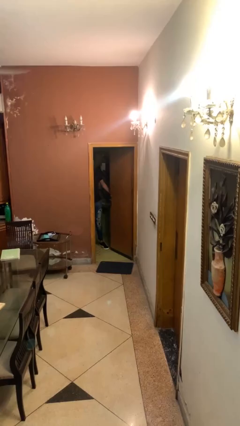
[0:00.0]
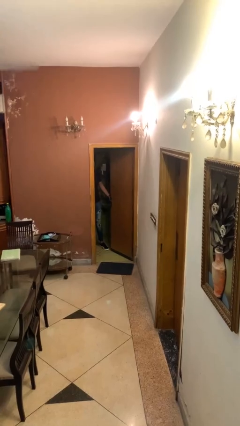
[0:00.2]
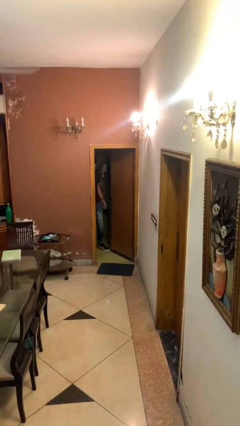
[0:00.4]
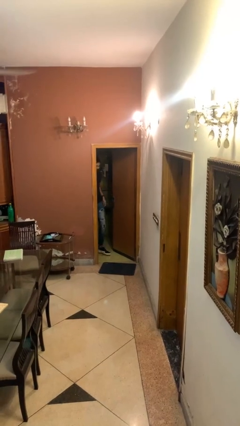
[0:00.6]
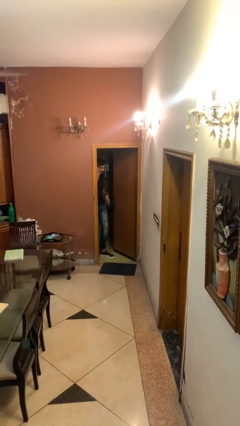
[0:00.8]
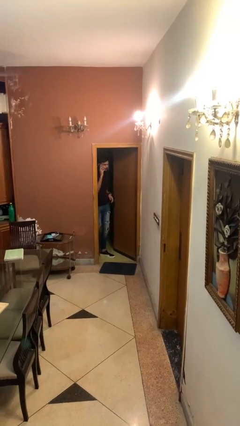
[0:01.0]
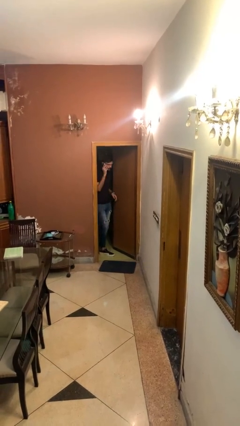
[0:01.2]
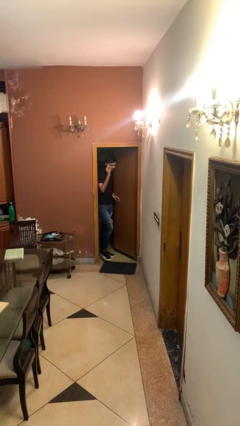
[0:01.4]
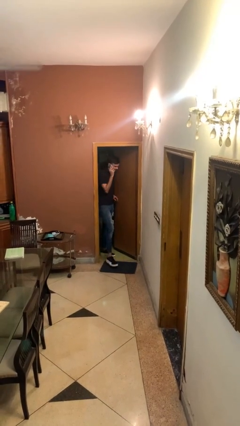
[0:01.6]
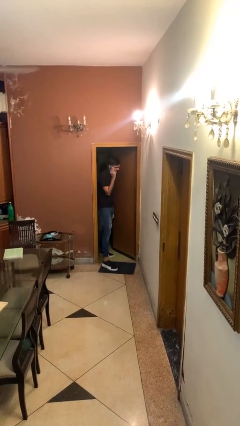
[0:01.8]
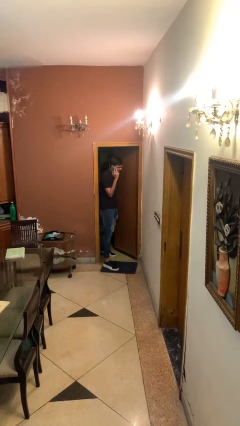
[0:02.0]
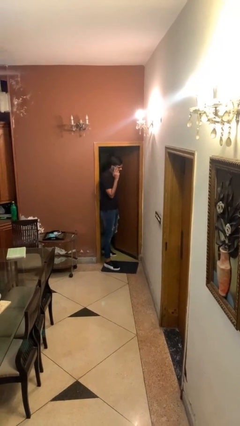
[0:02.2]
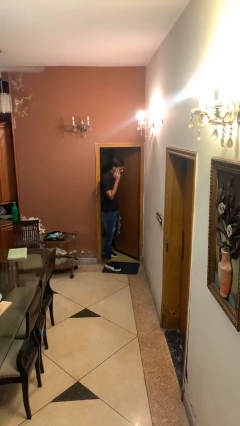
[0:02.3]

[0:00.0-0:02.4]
person enters scene through structure

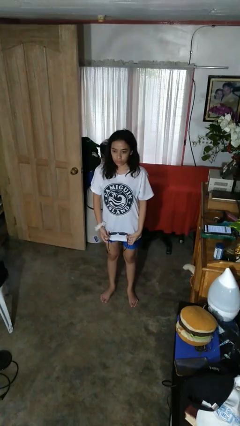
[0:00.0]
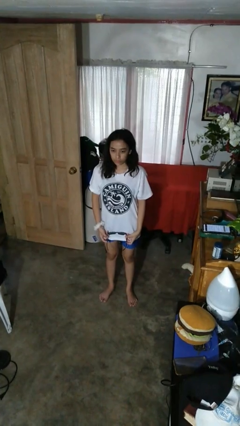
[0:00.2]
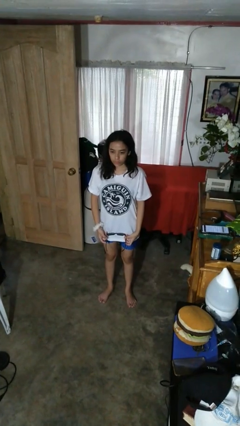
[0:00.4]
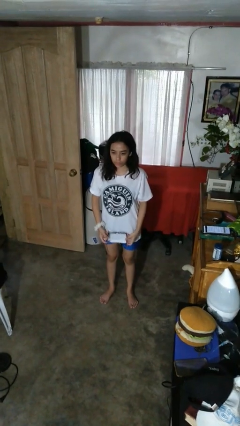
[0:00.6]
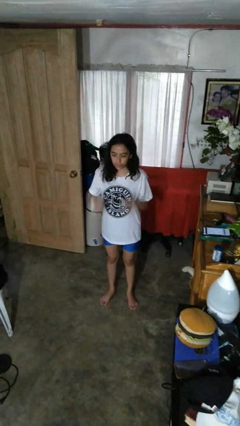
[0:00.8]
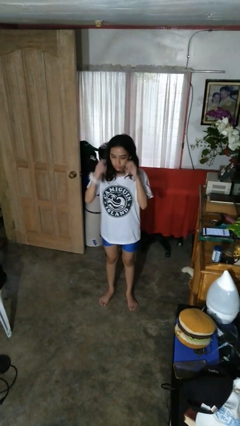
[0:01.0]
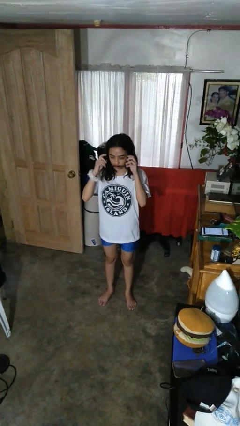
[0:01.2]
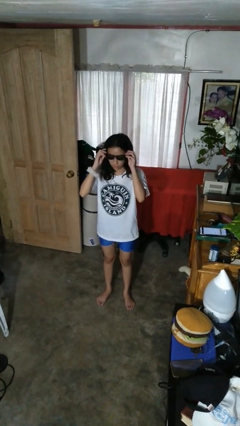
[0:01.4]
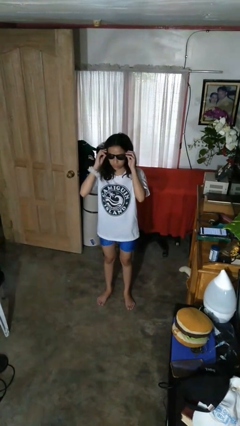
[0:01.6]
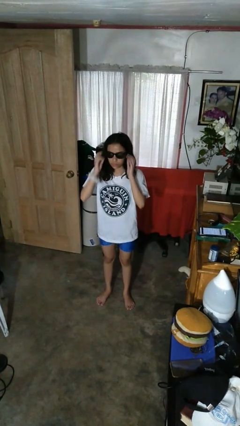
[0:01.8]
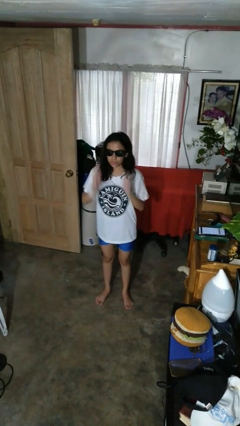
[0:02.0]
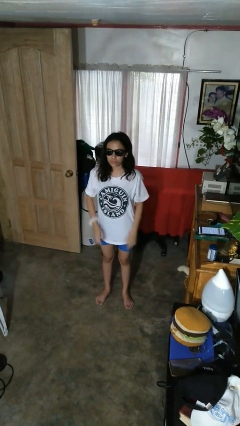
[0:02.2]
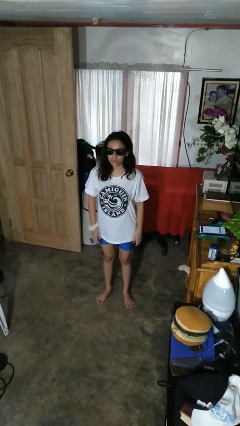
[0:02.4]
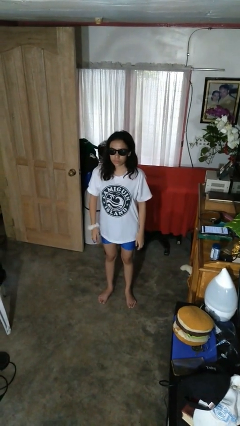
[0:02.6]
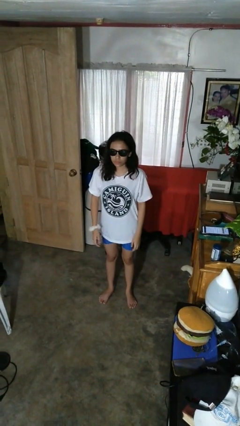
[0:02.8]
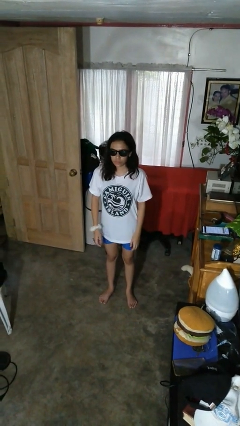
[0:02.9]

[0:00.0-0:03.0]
person puts on sunglasses

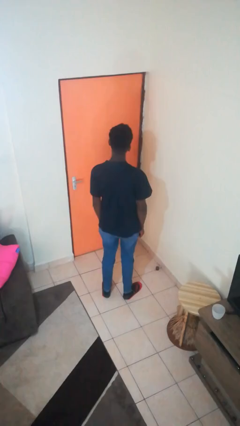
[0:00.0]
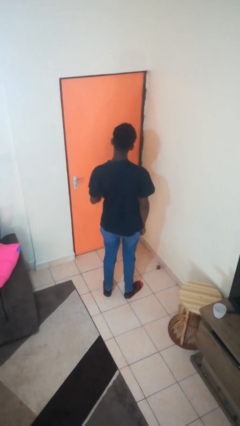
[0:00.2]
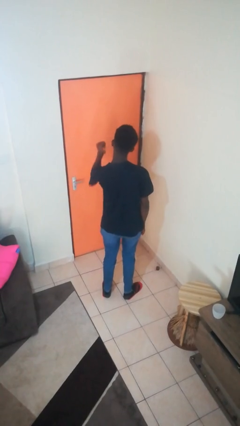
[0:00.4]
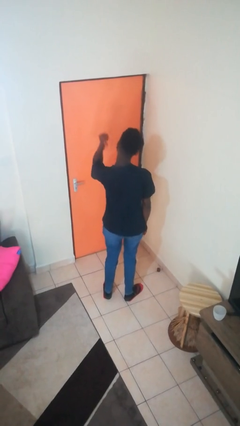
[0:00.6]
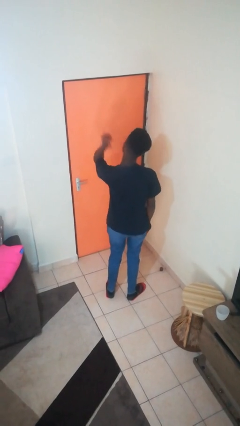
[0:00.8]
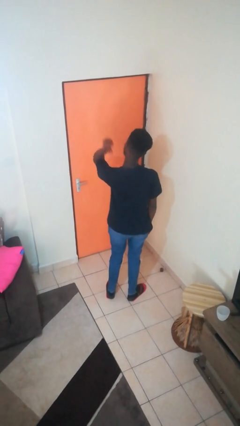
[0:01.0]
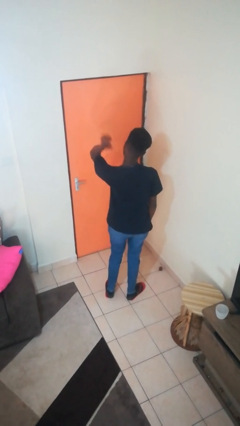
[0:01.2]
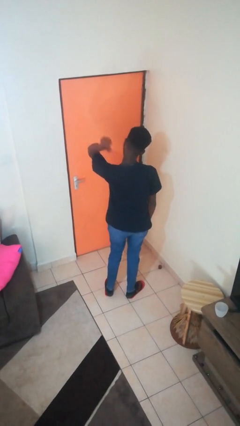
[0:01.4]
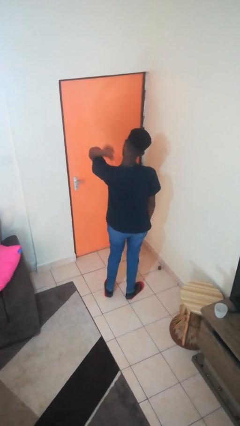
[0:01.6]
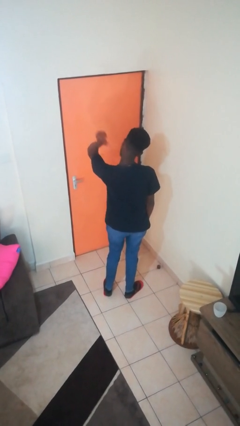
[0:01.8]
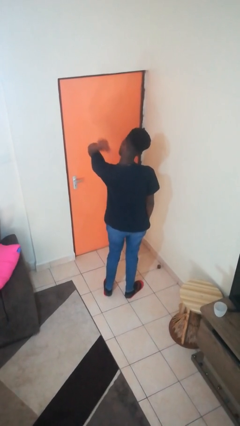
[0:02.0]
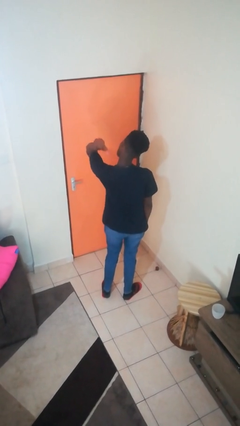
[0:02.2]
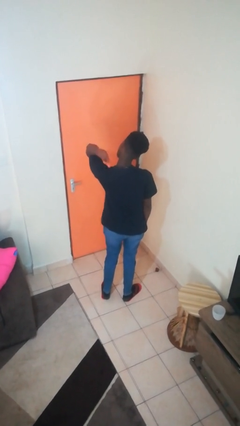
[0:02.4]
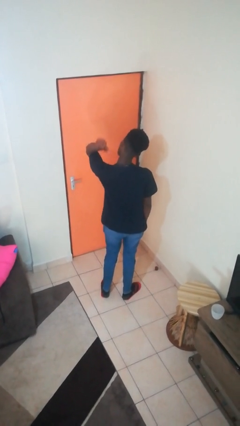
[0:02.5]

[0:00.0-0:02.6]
person gestures behind me

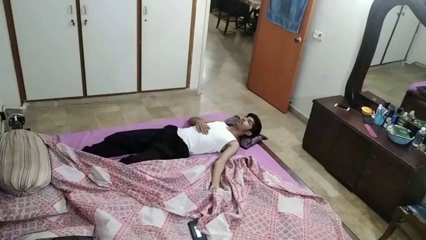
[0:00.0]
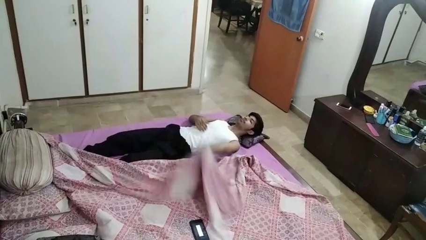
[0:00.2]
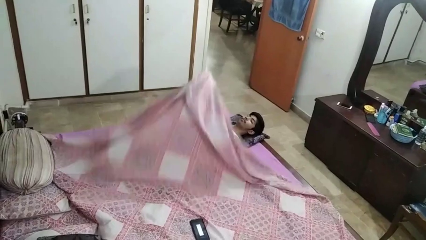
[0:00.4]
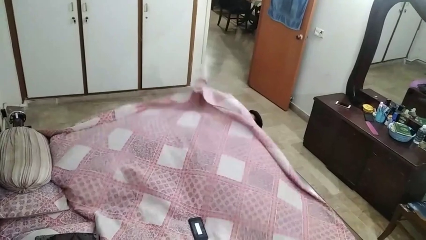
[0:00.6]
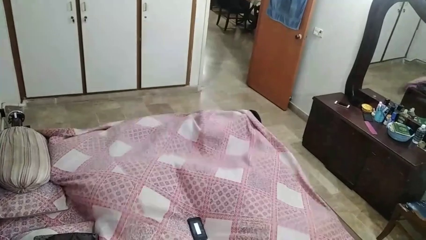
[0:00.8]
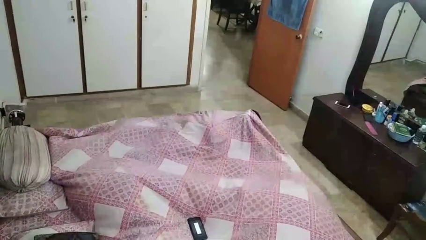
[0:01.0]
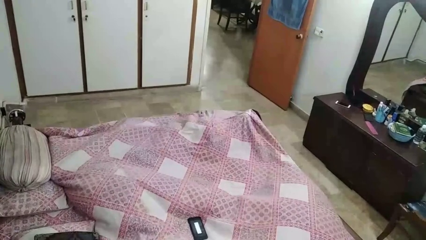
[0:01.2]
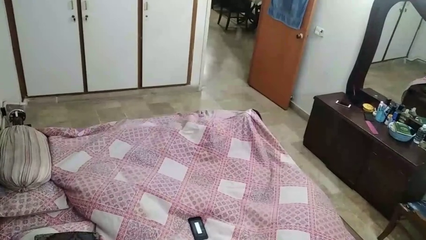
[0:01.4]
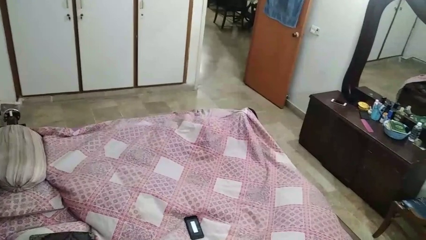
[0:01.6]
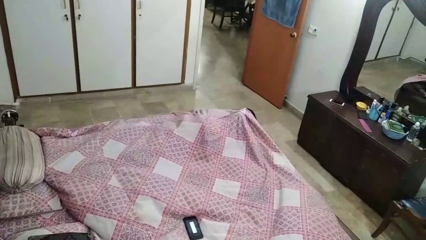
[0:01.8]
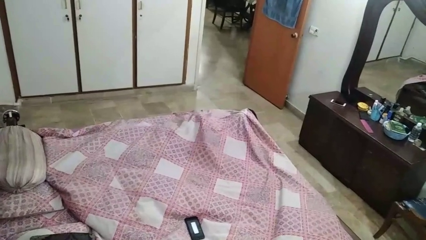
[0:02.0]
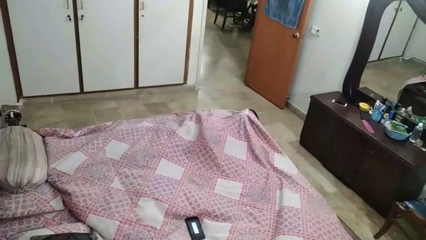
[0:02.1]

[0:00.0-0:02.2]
person covers with bedsheets

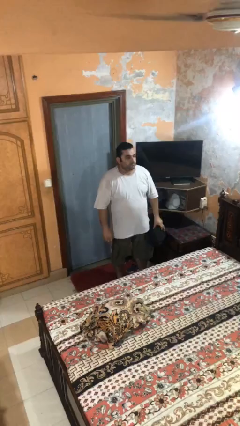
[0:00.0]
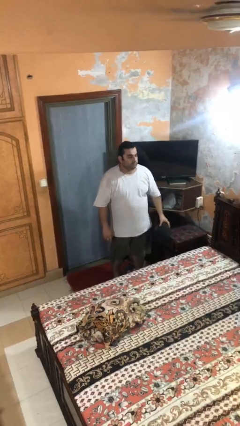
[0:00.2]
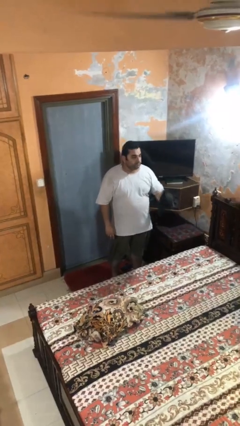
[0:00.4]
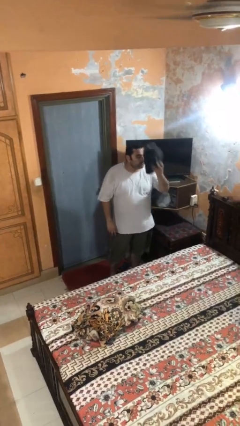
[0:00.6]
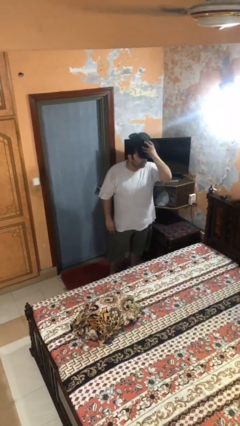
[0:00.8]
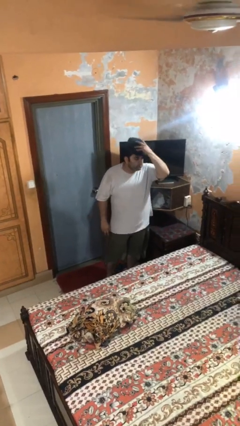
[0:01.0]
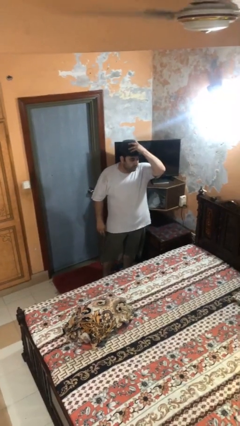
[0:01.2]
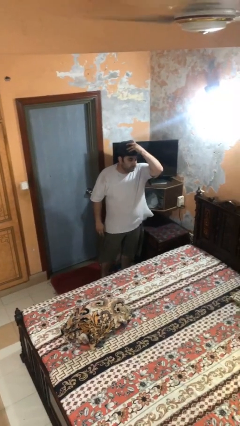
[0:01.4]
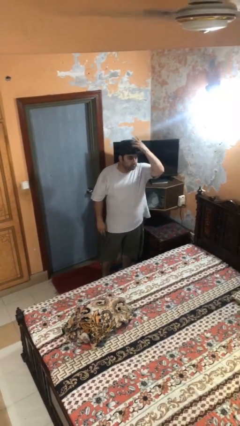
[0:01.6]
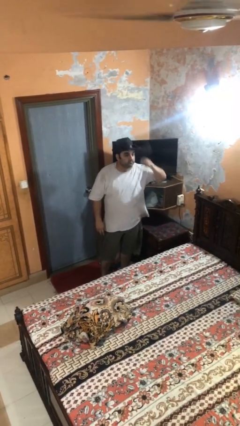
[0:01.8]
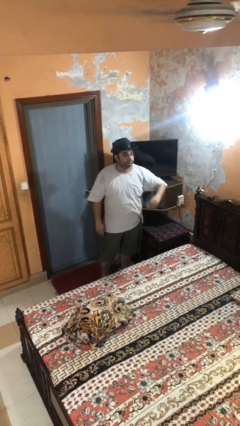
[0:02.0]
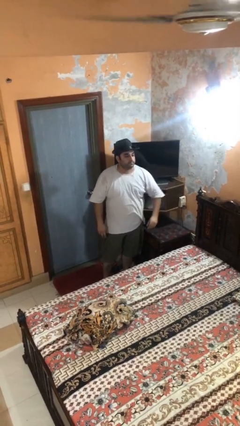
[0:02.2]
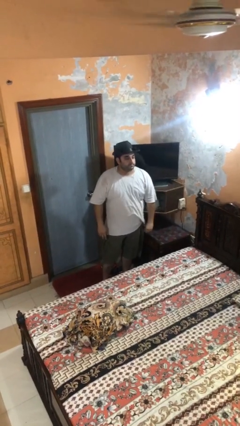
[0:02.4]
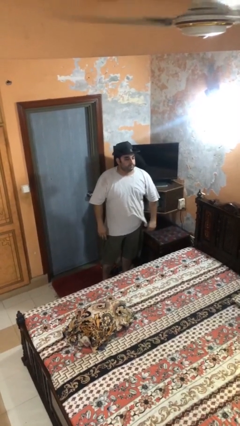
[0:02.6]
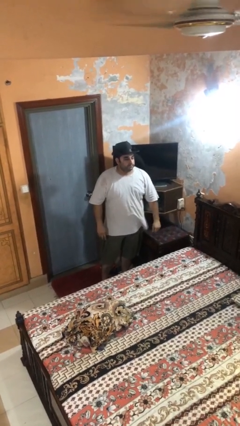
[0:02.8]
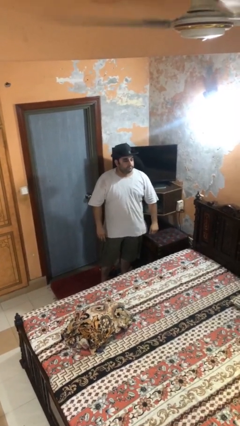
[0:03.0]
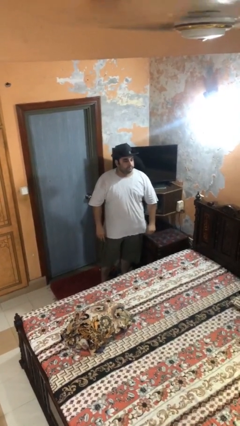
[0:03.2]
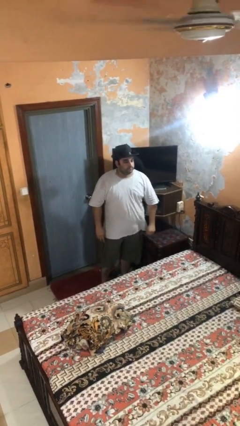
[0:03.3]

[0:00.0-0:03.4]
person puts on hat

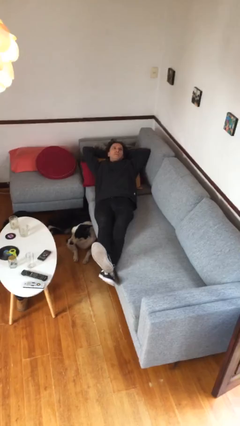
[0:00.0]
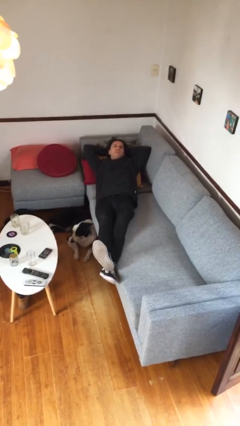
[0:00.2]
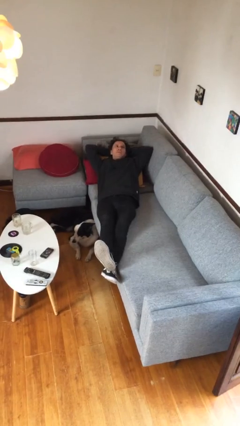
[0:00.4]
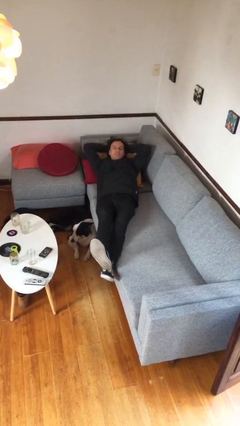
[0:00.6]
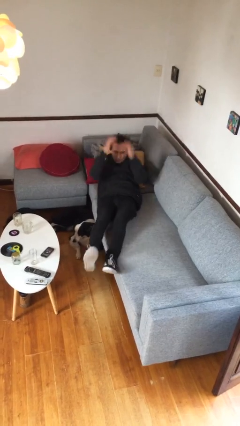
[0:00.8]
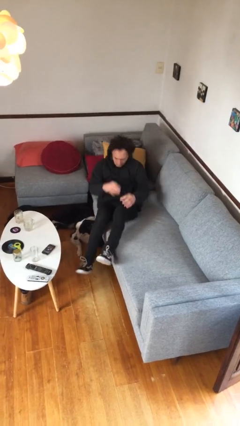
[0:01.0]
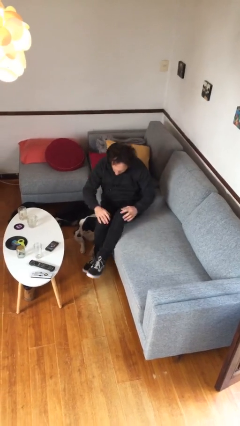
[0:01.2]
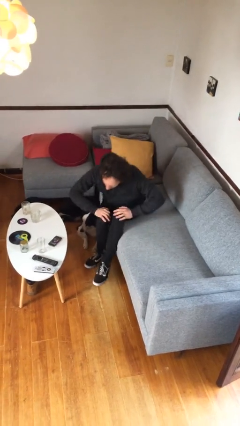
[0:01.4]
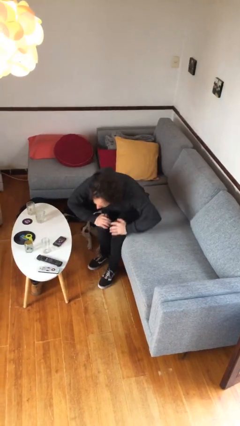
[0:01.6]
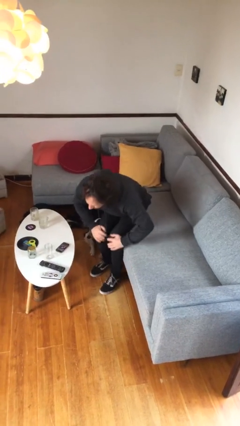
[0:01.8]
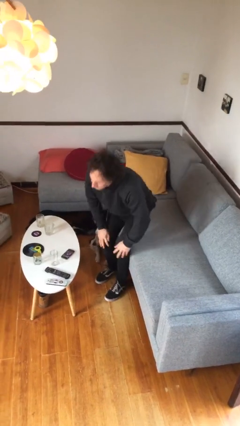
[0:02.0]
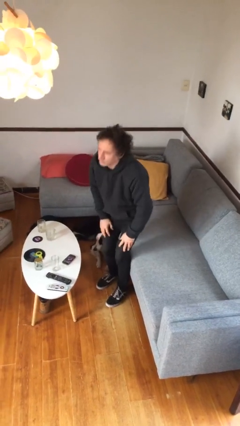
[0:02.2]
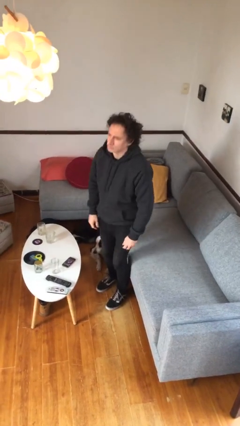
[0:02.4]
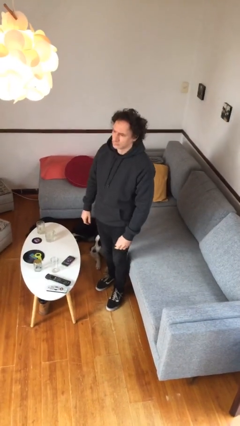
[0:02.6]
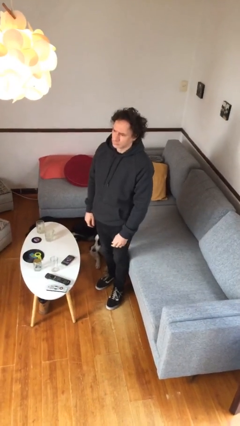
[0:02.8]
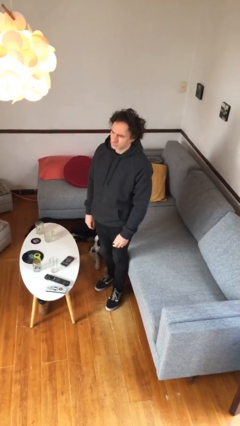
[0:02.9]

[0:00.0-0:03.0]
person stands up

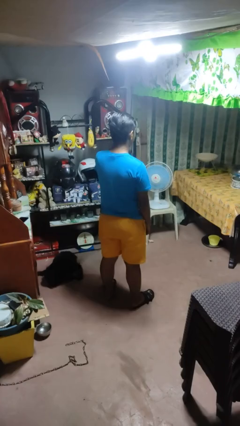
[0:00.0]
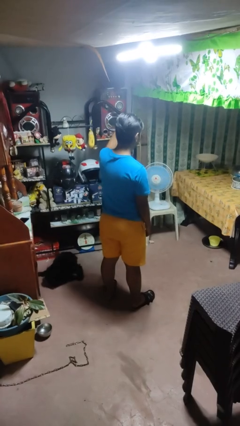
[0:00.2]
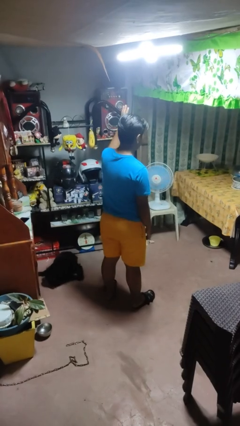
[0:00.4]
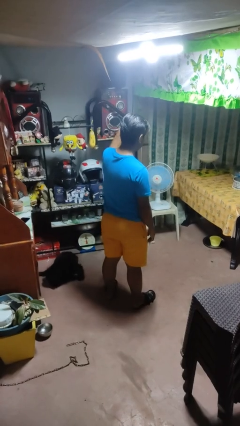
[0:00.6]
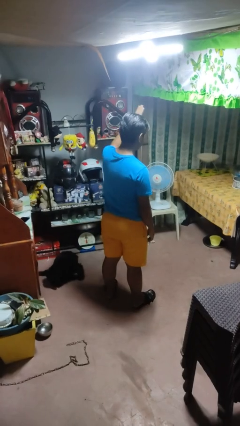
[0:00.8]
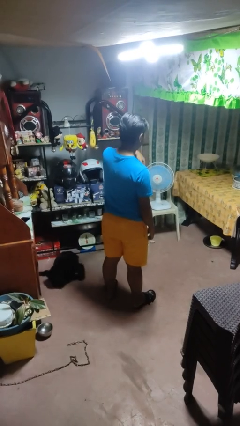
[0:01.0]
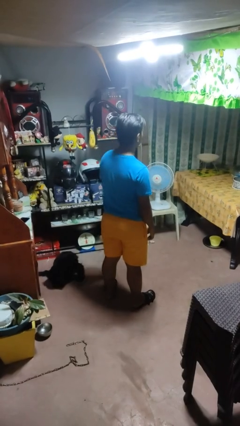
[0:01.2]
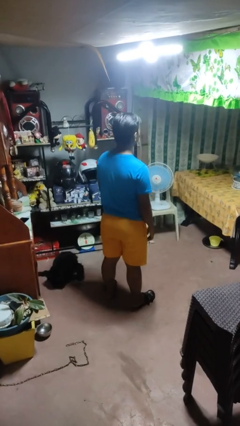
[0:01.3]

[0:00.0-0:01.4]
person gestures come here
